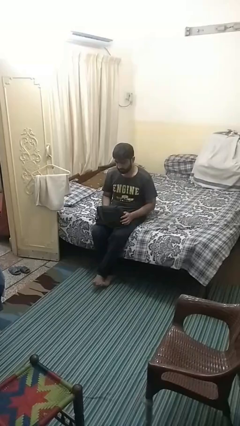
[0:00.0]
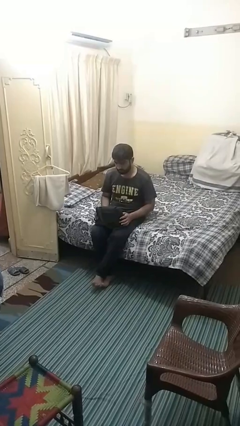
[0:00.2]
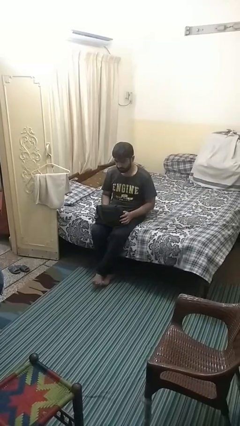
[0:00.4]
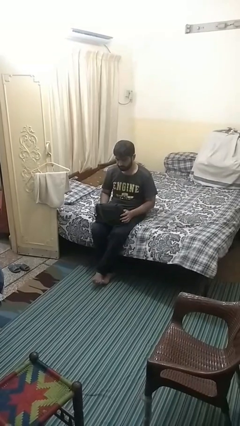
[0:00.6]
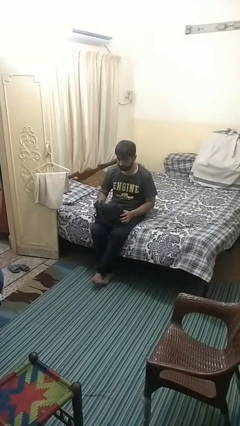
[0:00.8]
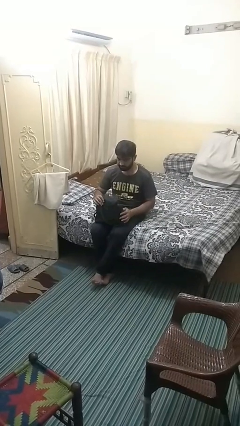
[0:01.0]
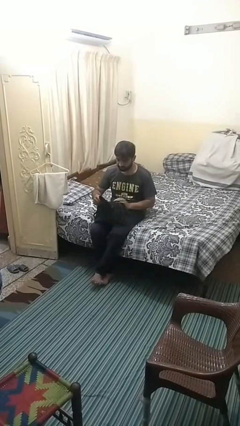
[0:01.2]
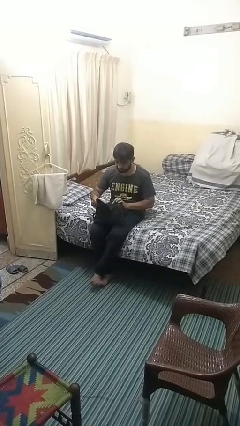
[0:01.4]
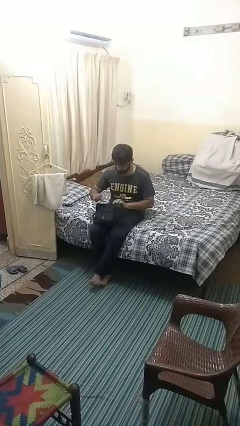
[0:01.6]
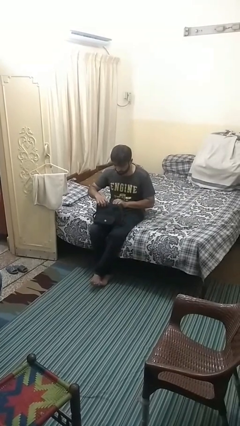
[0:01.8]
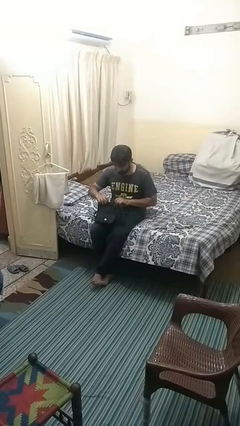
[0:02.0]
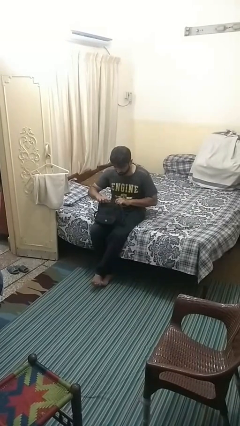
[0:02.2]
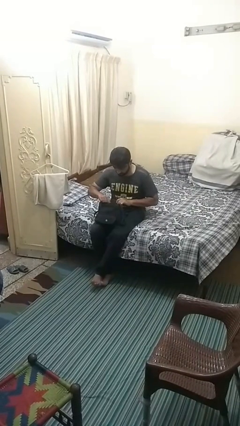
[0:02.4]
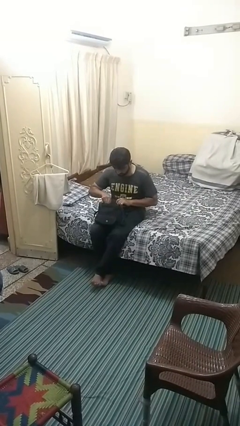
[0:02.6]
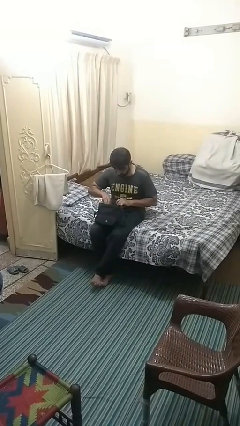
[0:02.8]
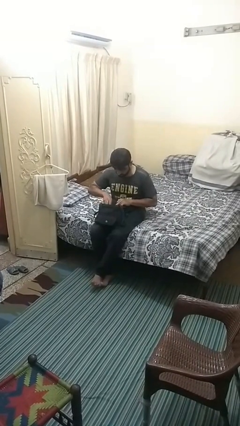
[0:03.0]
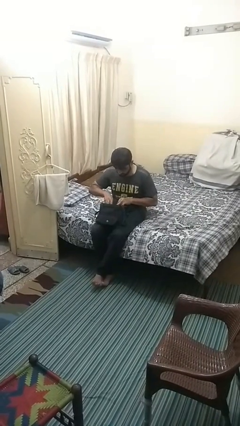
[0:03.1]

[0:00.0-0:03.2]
person searches in purse

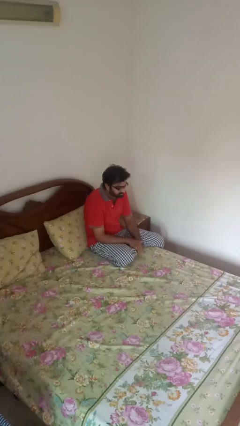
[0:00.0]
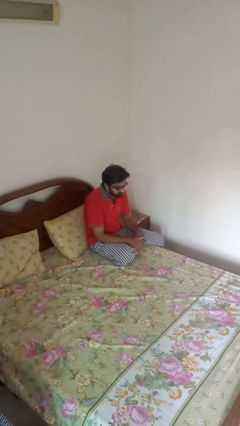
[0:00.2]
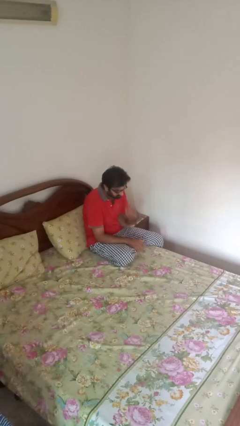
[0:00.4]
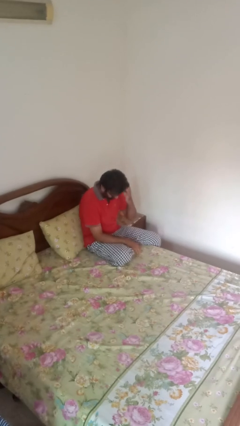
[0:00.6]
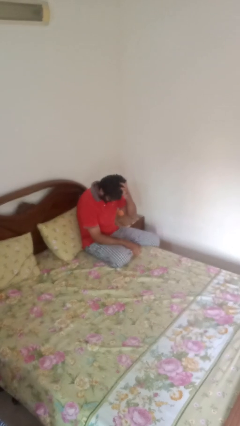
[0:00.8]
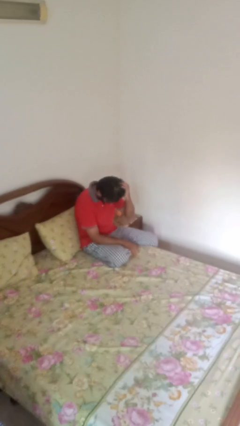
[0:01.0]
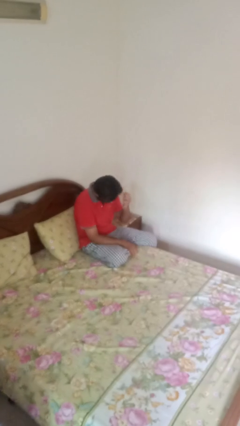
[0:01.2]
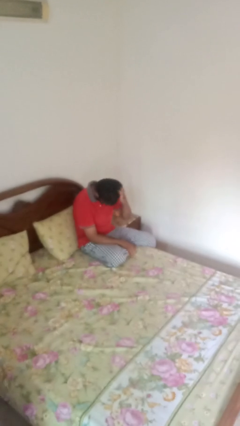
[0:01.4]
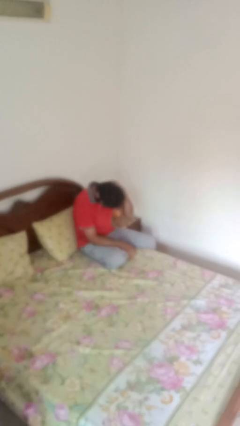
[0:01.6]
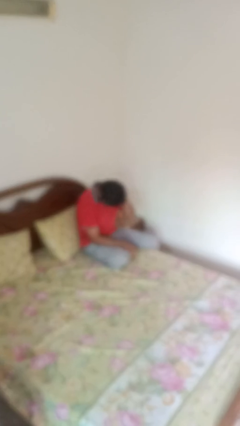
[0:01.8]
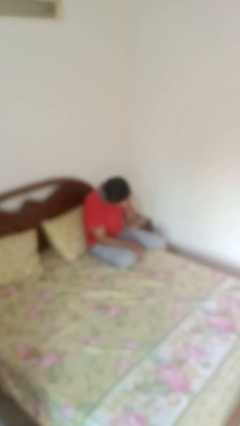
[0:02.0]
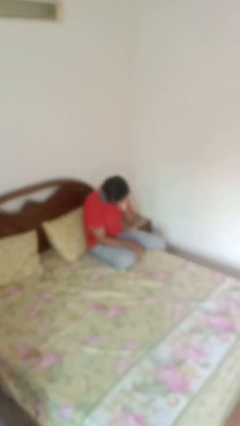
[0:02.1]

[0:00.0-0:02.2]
person strokes hair

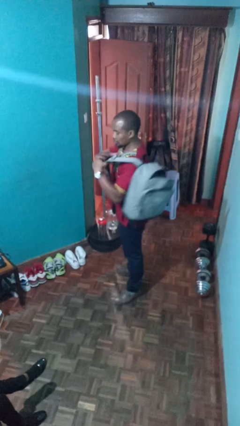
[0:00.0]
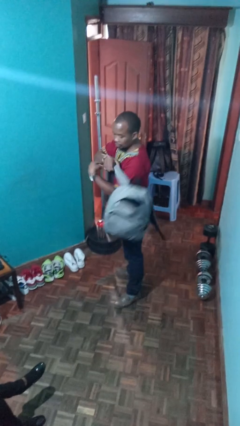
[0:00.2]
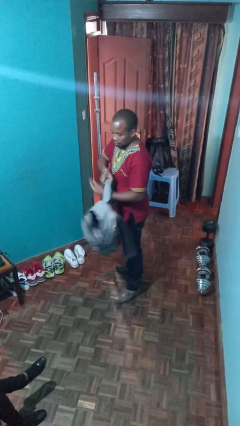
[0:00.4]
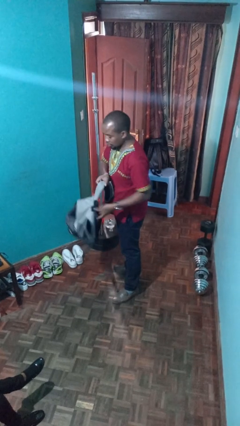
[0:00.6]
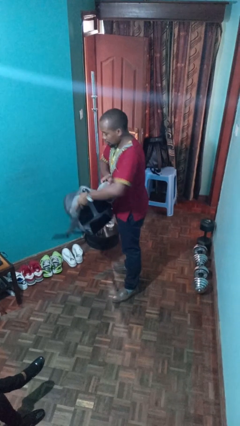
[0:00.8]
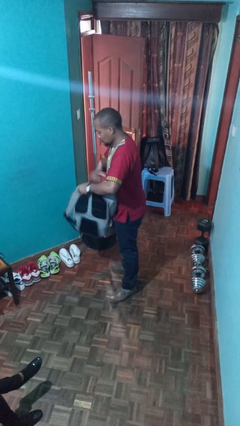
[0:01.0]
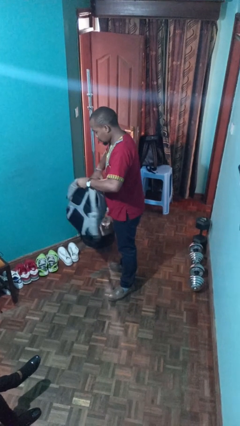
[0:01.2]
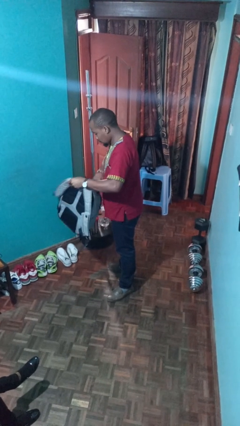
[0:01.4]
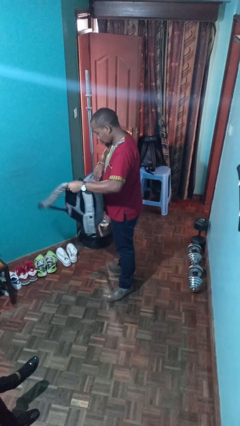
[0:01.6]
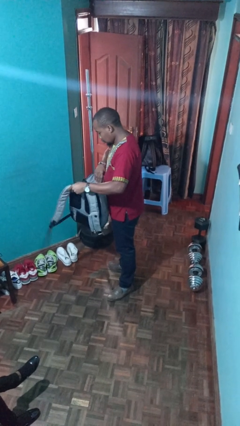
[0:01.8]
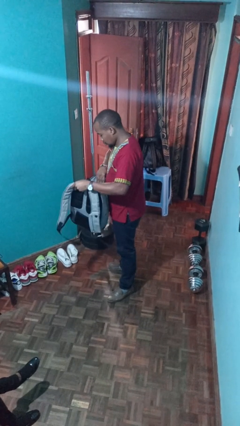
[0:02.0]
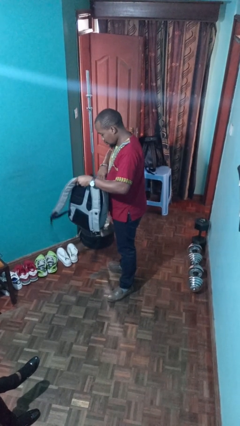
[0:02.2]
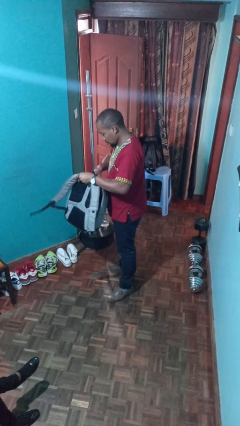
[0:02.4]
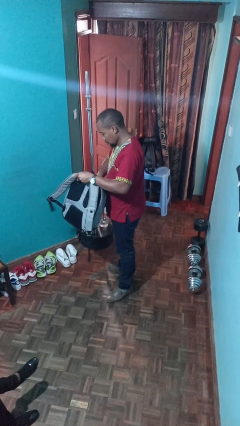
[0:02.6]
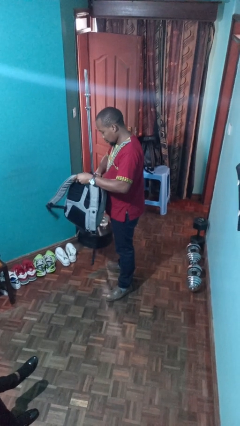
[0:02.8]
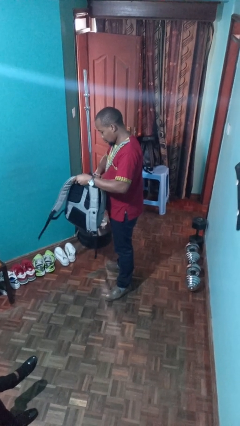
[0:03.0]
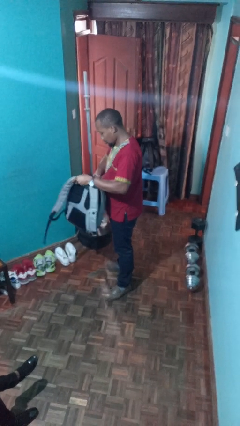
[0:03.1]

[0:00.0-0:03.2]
person searches in backpack

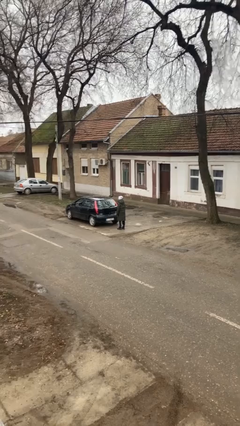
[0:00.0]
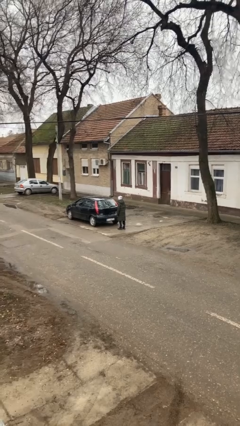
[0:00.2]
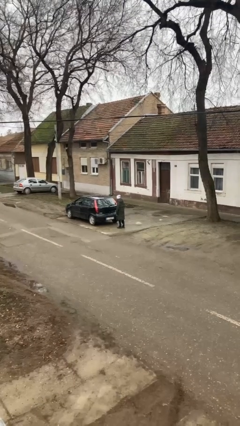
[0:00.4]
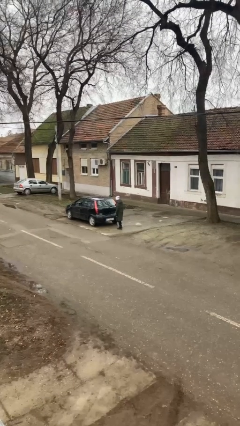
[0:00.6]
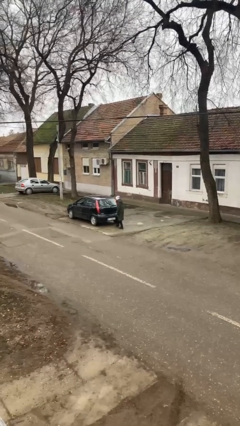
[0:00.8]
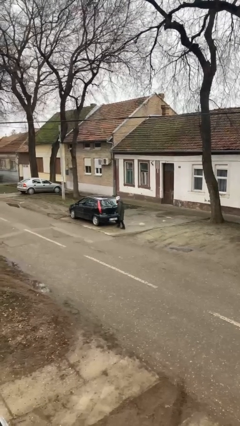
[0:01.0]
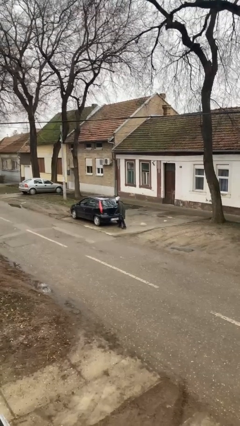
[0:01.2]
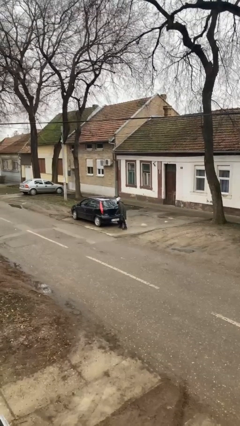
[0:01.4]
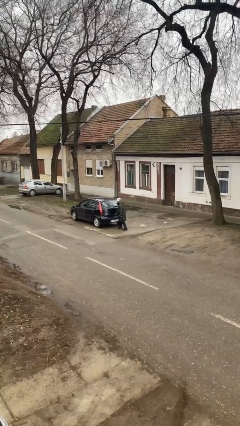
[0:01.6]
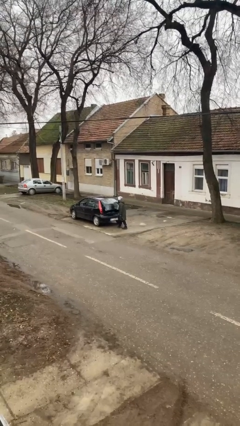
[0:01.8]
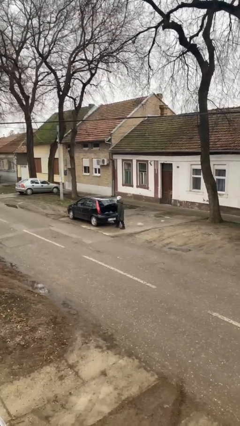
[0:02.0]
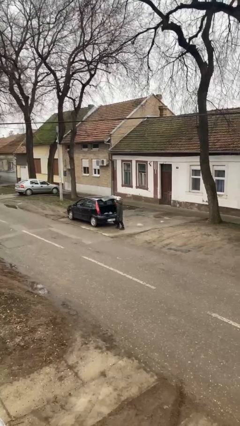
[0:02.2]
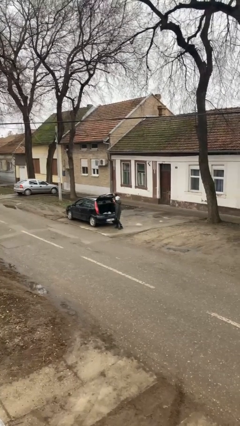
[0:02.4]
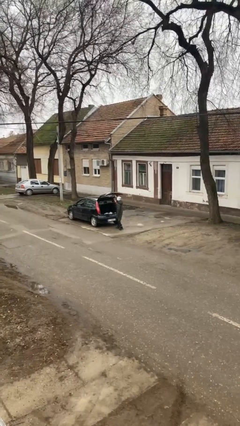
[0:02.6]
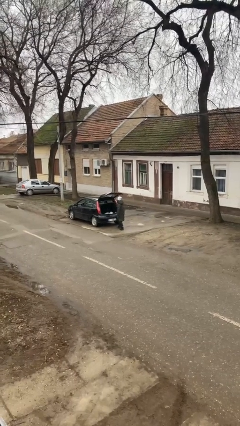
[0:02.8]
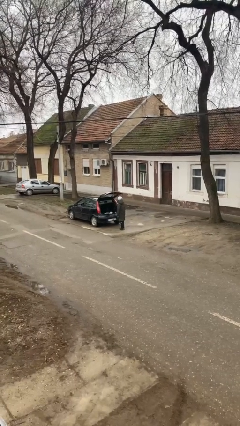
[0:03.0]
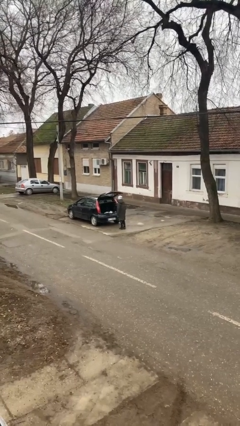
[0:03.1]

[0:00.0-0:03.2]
person opens car trunk

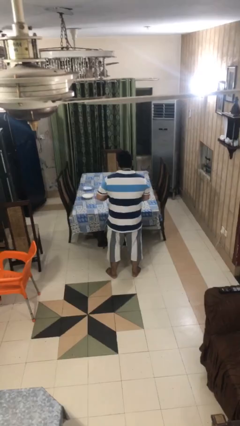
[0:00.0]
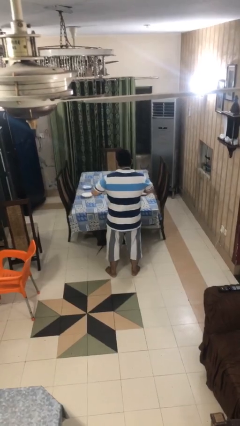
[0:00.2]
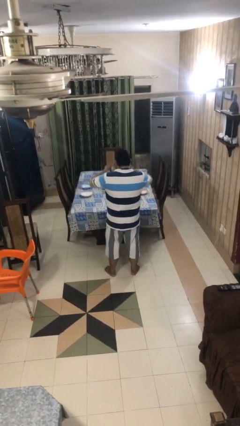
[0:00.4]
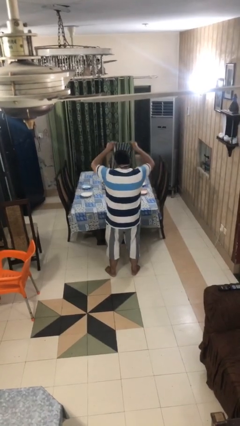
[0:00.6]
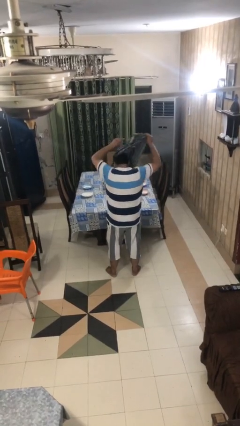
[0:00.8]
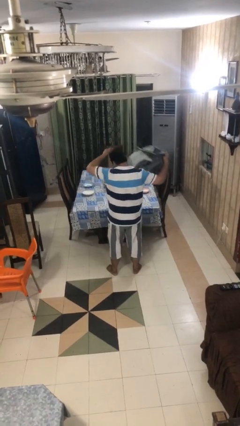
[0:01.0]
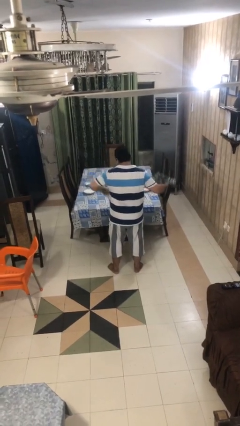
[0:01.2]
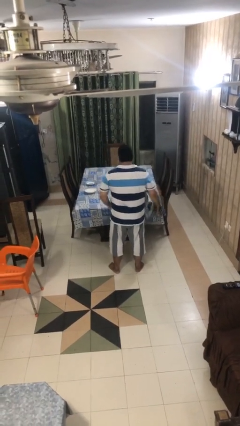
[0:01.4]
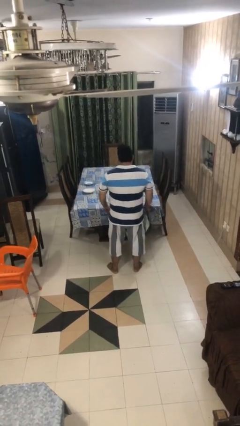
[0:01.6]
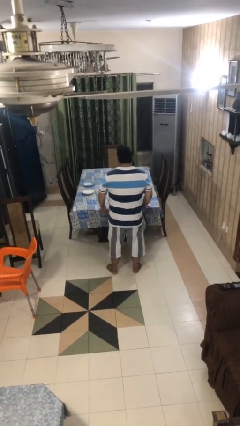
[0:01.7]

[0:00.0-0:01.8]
person takes off apron

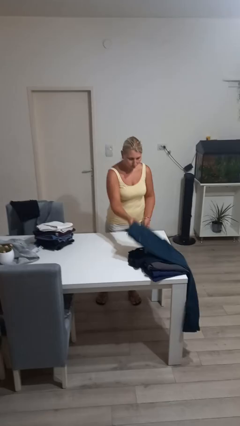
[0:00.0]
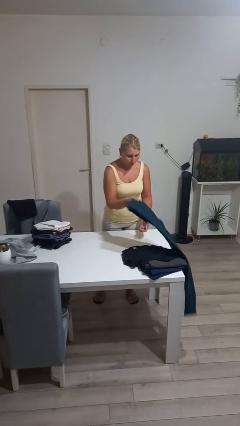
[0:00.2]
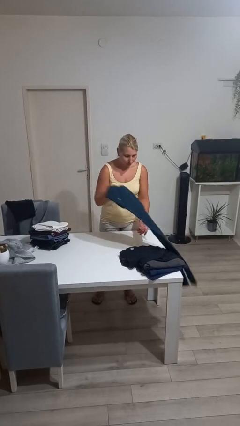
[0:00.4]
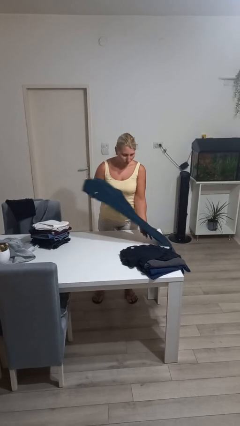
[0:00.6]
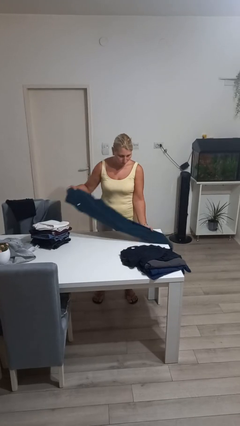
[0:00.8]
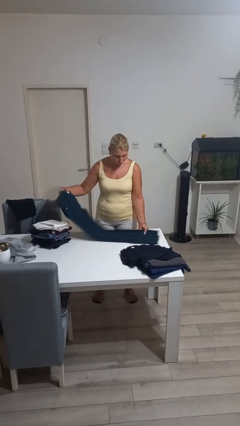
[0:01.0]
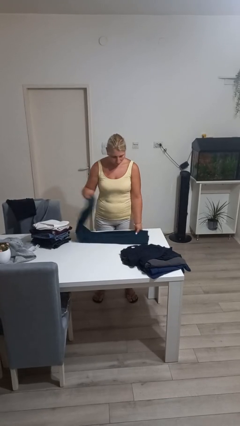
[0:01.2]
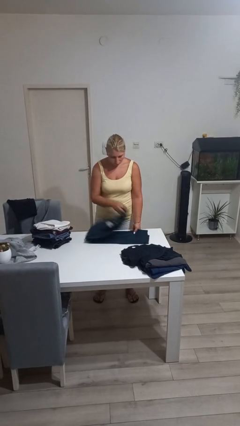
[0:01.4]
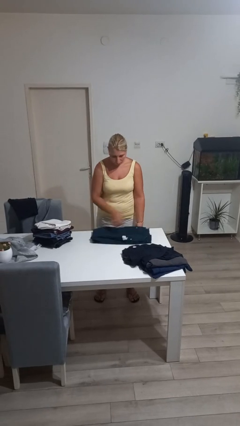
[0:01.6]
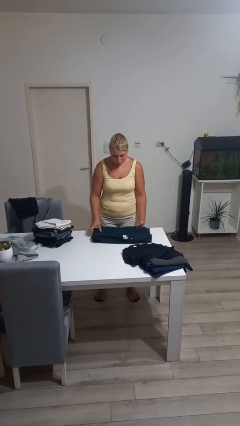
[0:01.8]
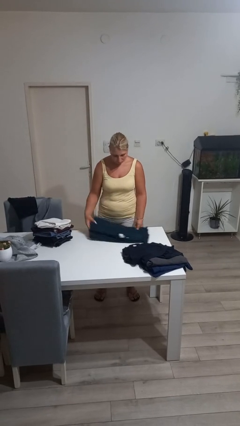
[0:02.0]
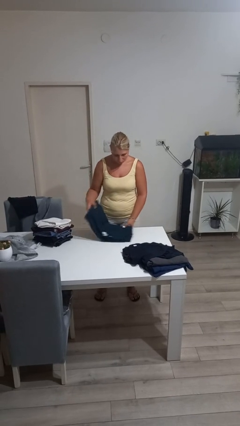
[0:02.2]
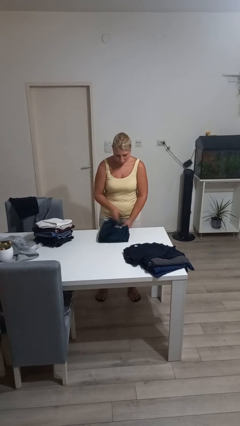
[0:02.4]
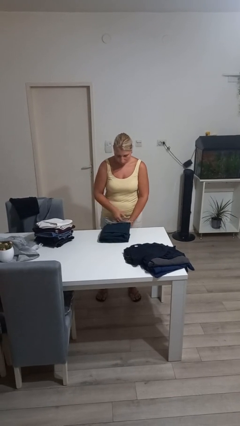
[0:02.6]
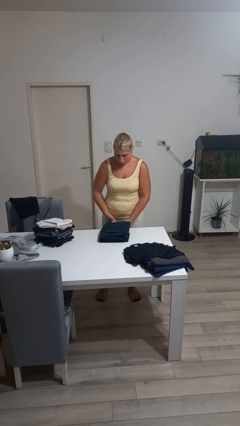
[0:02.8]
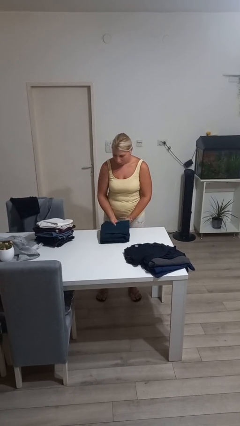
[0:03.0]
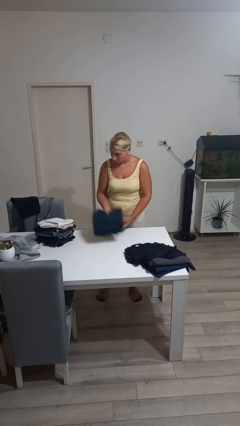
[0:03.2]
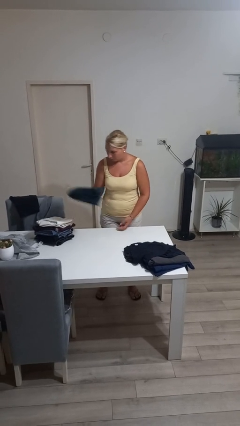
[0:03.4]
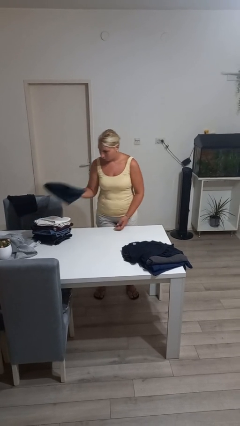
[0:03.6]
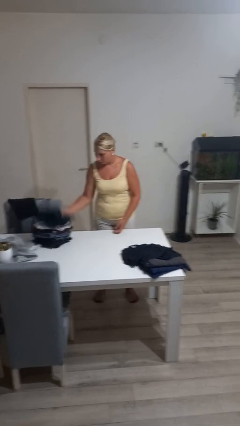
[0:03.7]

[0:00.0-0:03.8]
person folds pants

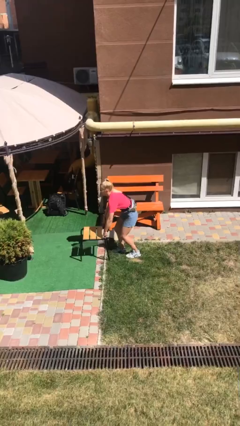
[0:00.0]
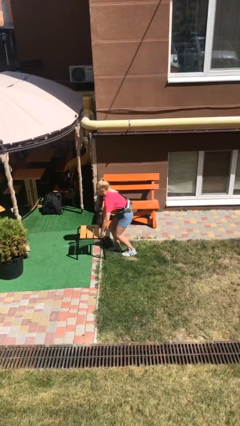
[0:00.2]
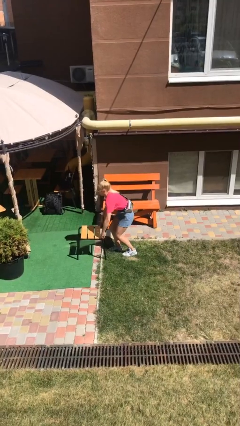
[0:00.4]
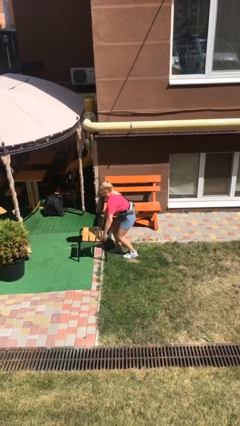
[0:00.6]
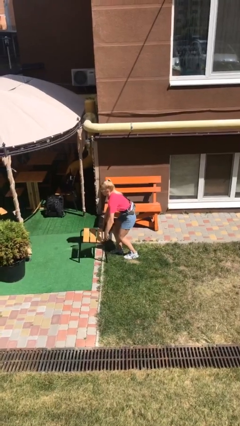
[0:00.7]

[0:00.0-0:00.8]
person puts down object on floor
